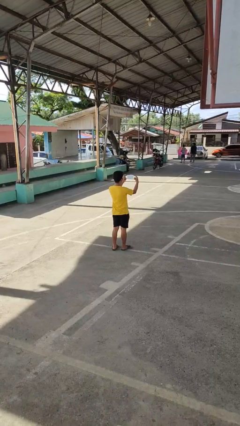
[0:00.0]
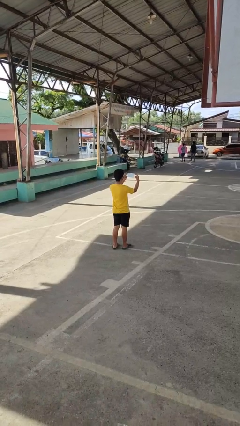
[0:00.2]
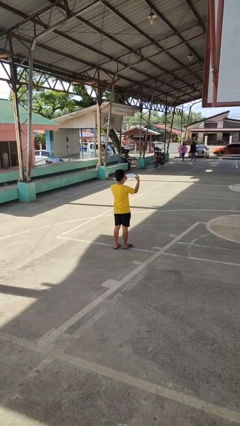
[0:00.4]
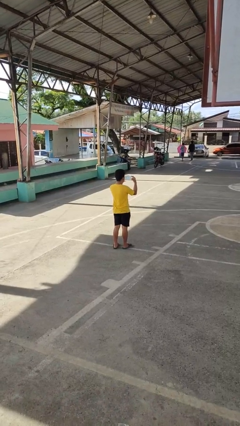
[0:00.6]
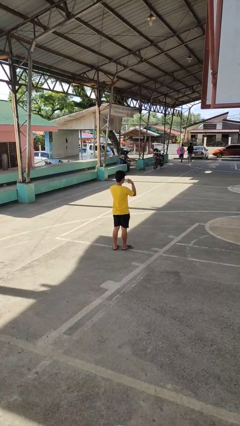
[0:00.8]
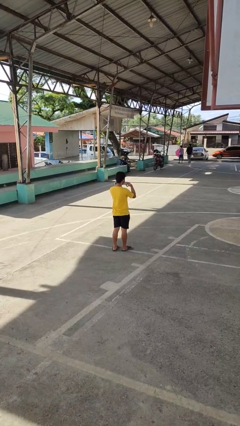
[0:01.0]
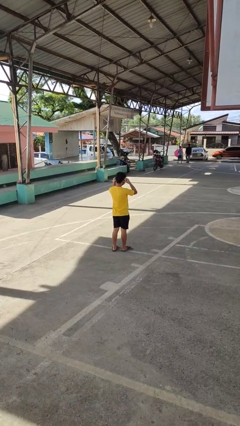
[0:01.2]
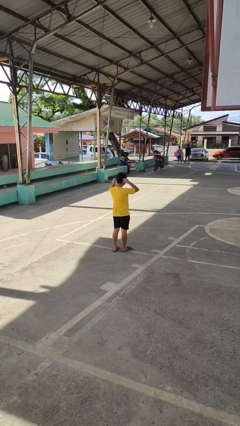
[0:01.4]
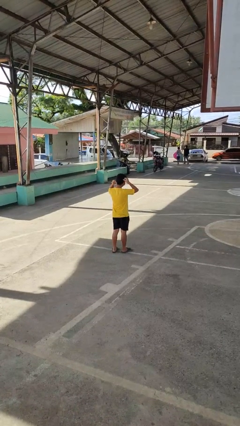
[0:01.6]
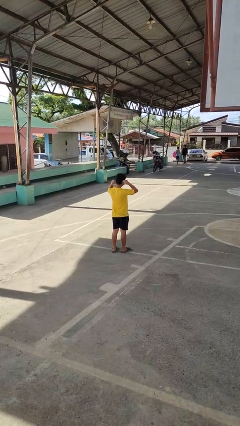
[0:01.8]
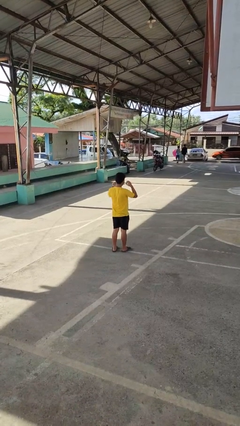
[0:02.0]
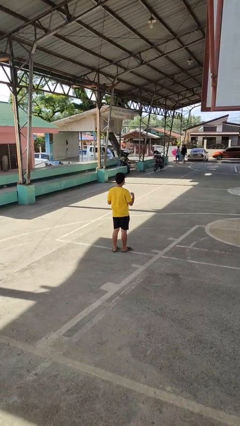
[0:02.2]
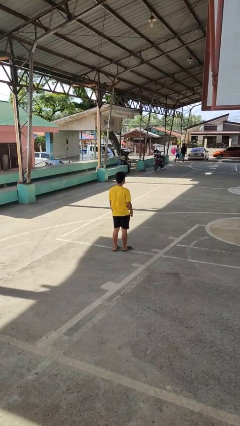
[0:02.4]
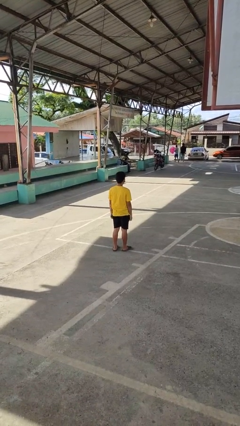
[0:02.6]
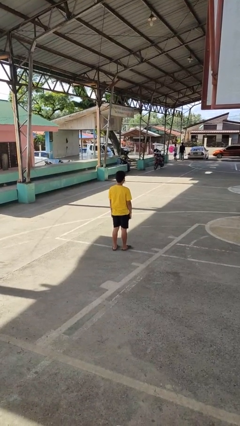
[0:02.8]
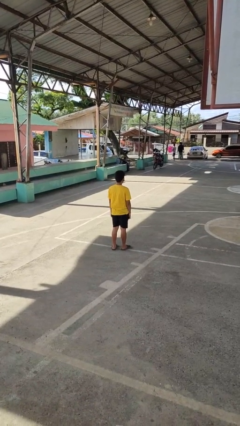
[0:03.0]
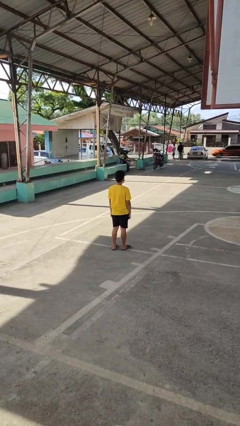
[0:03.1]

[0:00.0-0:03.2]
person puts on facemask

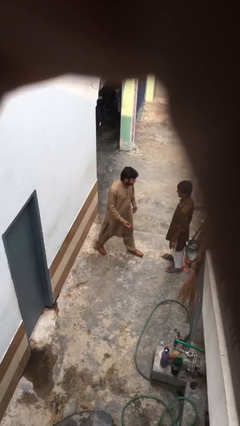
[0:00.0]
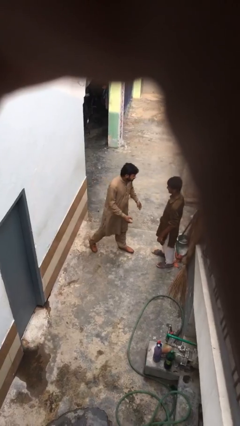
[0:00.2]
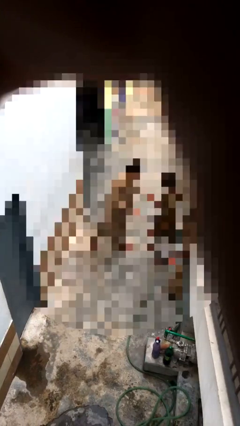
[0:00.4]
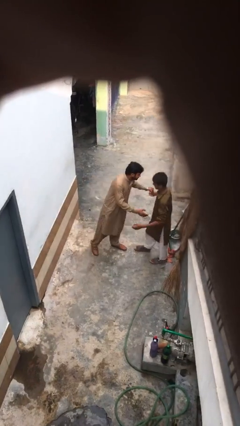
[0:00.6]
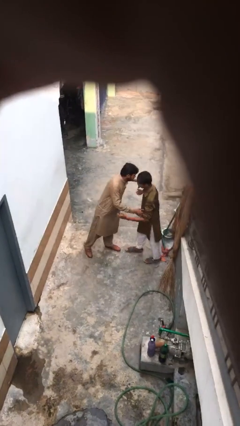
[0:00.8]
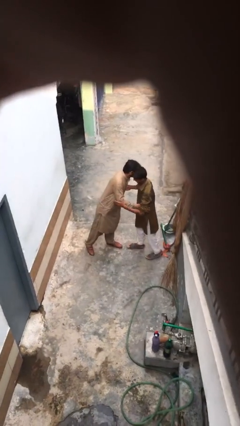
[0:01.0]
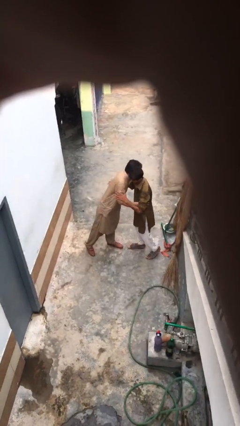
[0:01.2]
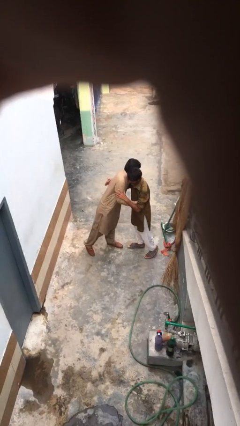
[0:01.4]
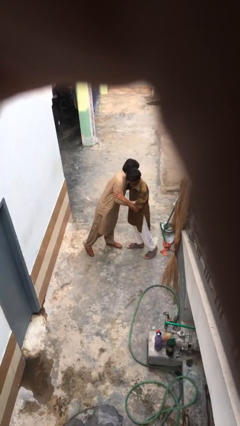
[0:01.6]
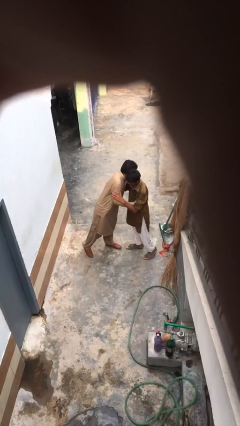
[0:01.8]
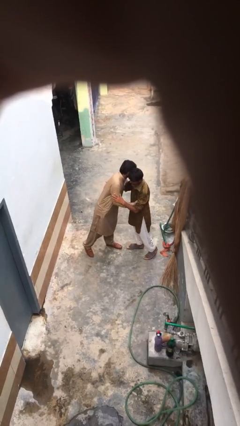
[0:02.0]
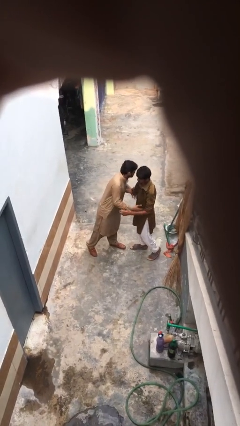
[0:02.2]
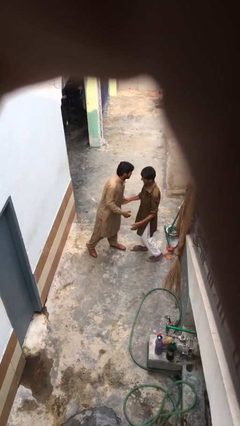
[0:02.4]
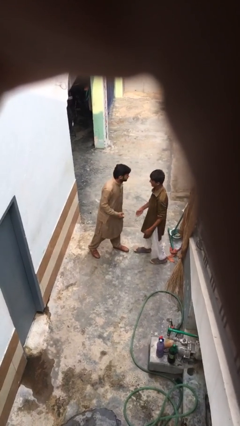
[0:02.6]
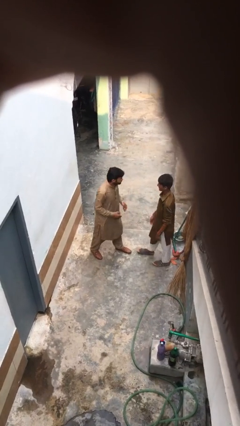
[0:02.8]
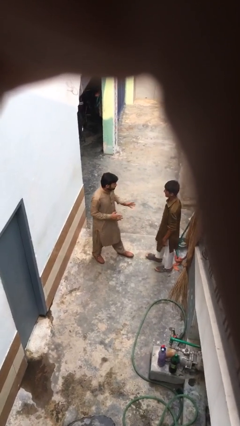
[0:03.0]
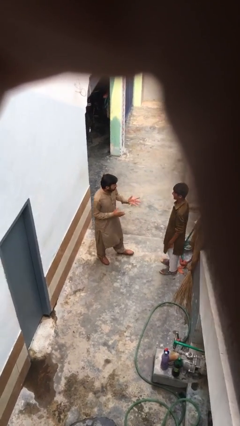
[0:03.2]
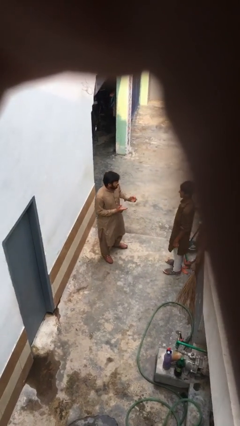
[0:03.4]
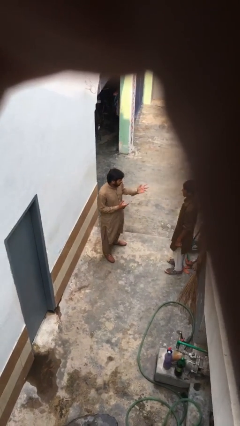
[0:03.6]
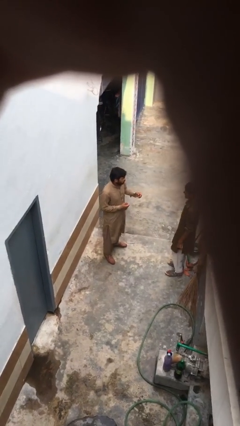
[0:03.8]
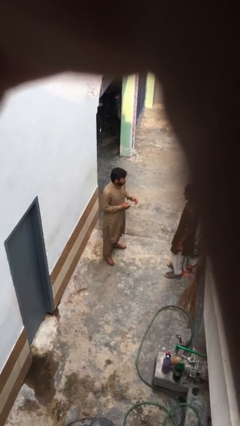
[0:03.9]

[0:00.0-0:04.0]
person embraces person

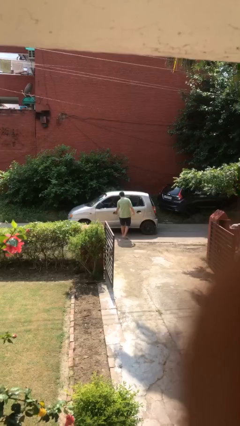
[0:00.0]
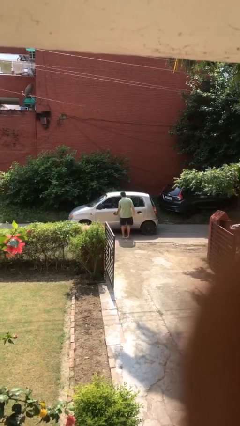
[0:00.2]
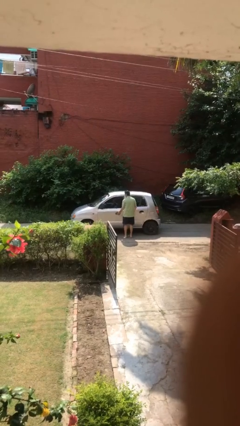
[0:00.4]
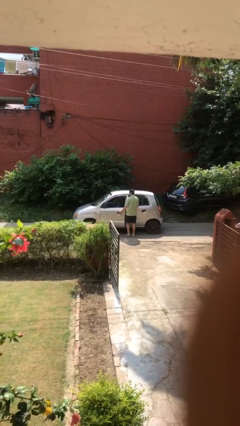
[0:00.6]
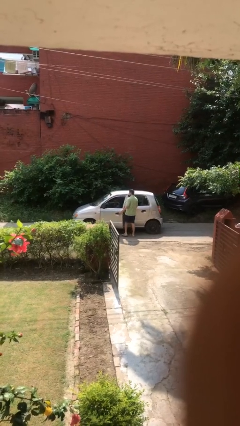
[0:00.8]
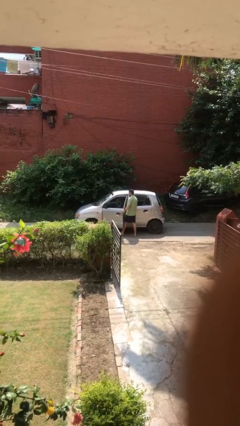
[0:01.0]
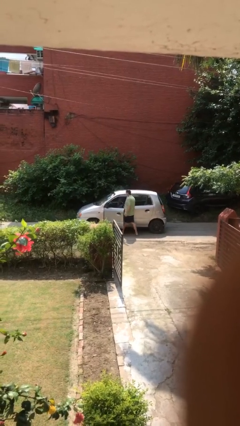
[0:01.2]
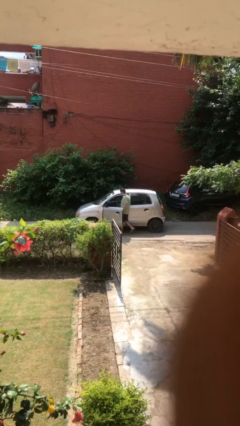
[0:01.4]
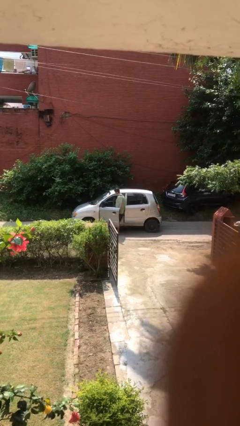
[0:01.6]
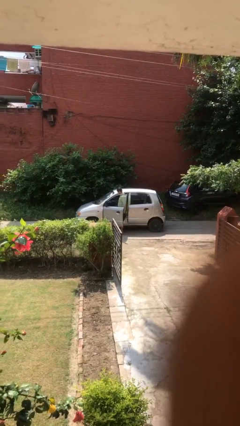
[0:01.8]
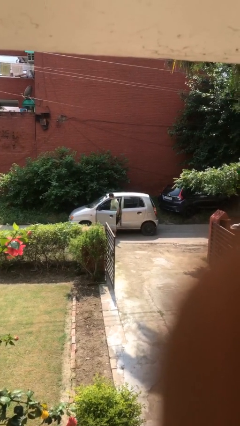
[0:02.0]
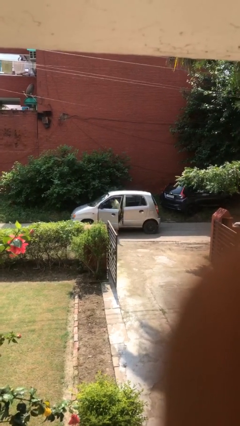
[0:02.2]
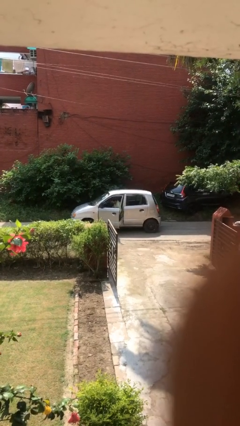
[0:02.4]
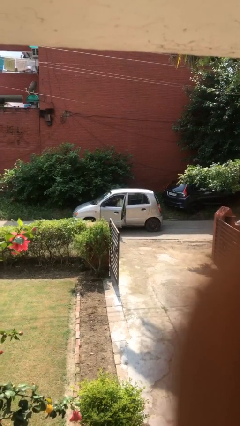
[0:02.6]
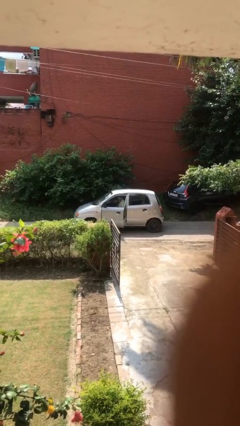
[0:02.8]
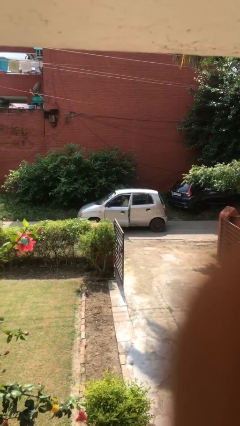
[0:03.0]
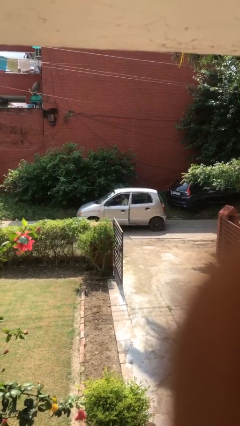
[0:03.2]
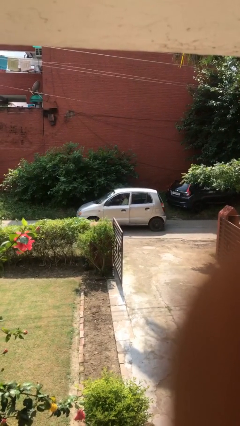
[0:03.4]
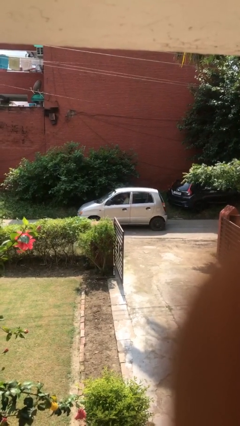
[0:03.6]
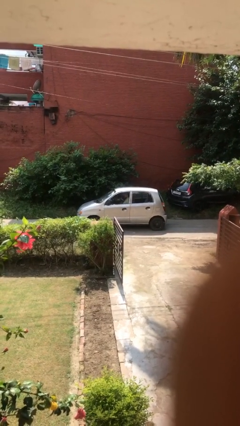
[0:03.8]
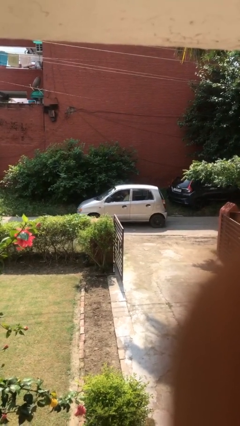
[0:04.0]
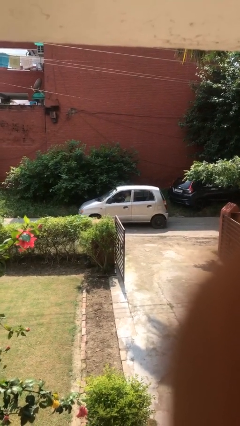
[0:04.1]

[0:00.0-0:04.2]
car picks up person

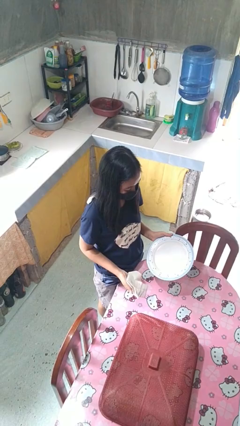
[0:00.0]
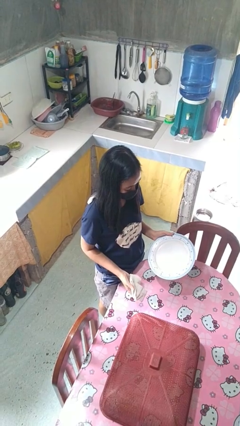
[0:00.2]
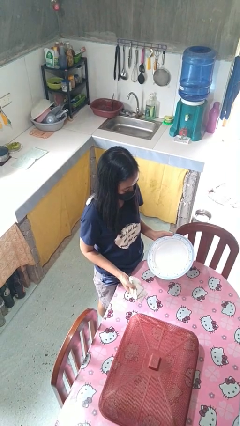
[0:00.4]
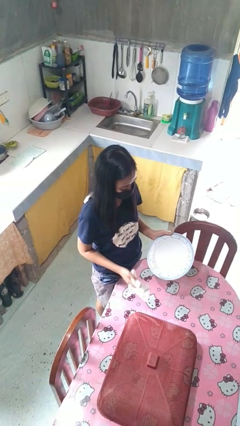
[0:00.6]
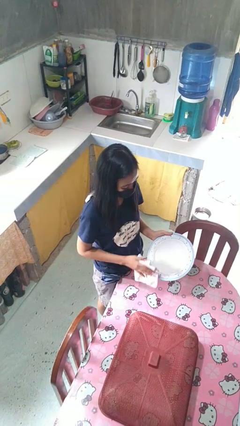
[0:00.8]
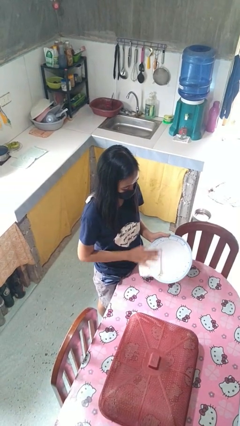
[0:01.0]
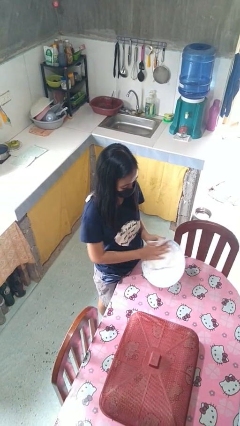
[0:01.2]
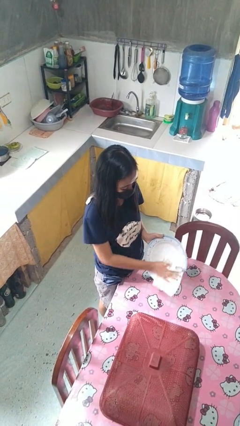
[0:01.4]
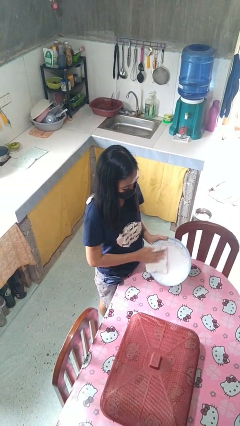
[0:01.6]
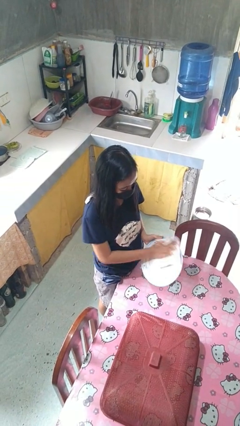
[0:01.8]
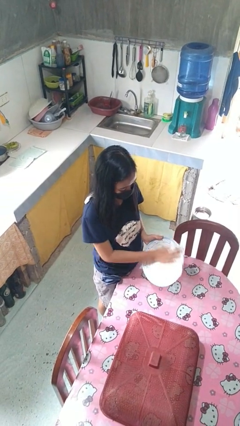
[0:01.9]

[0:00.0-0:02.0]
person dries dish

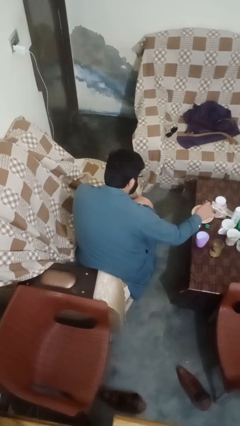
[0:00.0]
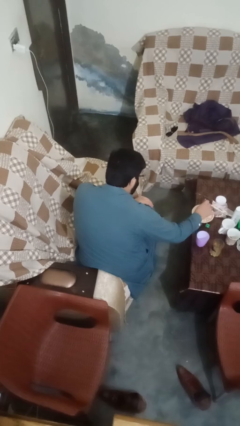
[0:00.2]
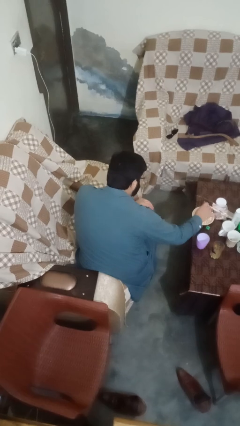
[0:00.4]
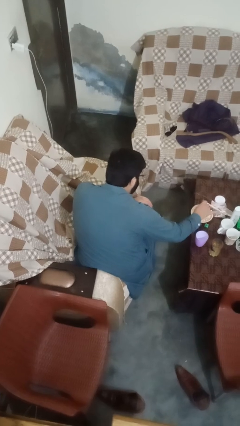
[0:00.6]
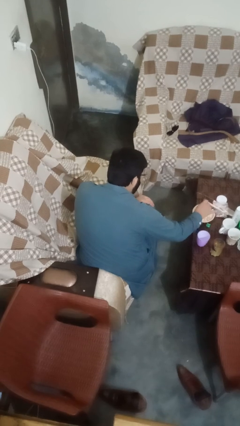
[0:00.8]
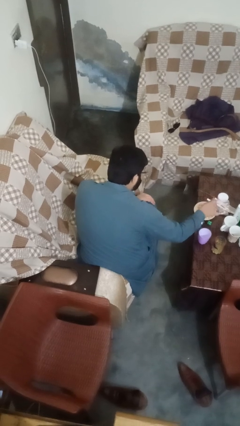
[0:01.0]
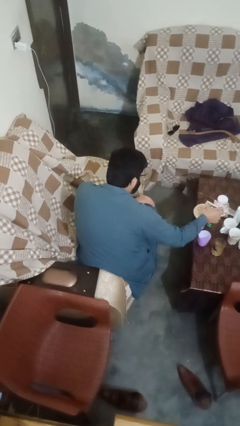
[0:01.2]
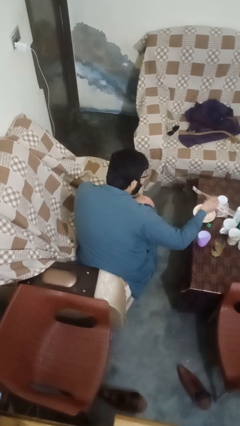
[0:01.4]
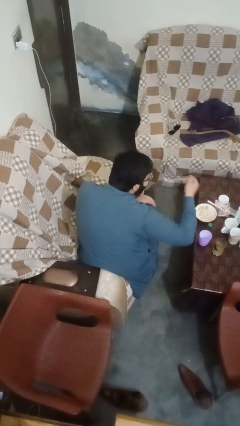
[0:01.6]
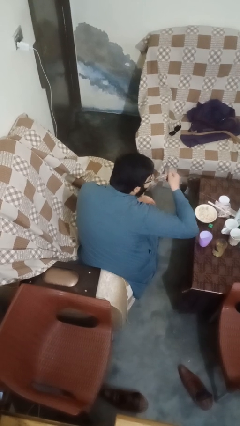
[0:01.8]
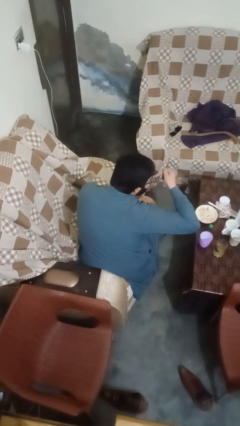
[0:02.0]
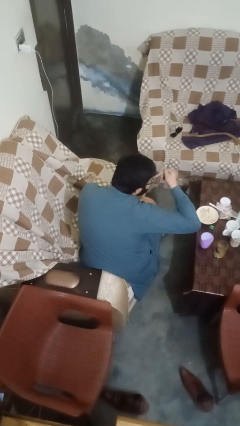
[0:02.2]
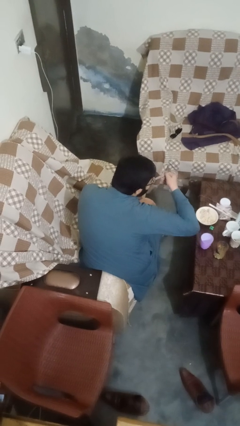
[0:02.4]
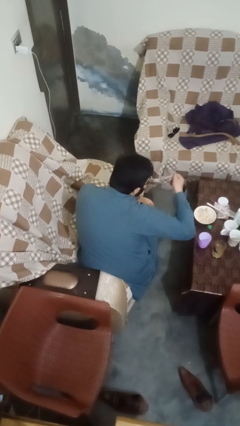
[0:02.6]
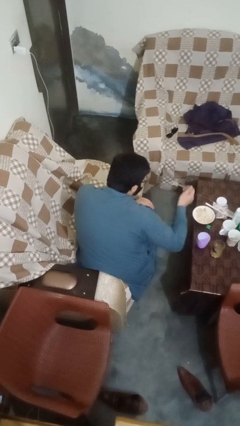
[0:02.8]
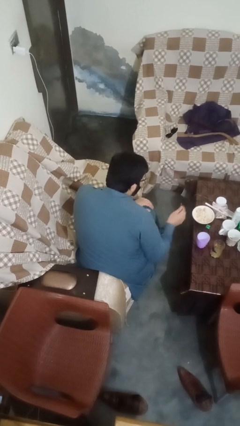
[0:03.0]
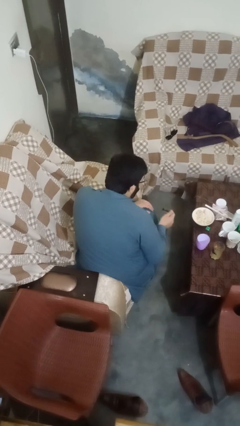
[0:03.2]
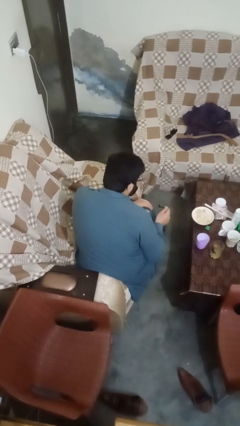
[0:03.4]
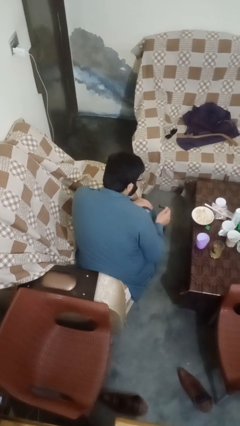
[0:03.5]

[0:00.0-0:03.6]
person eats with utensil

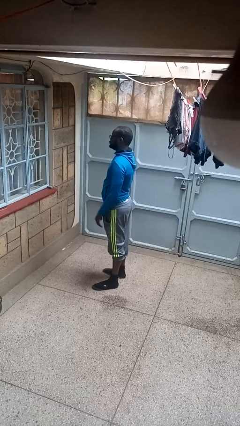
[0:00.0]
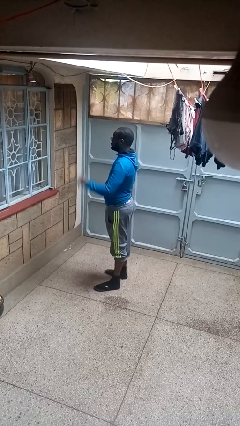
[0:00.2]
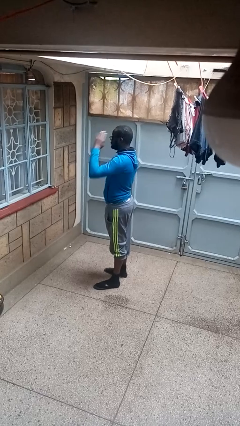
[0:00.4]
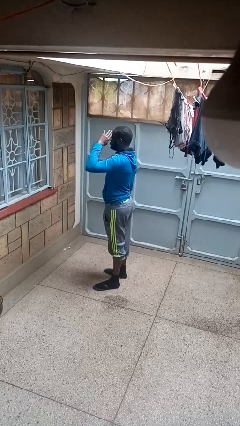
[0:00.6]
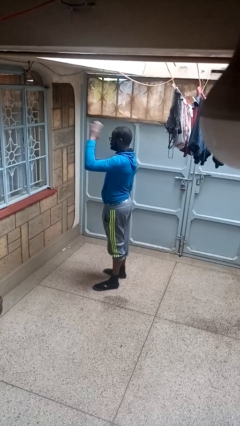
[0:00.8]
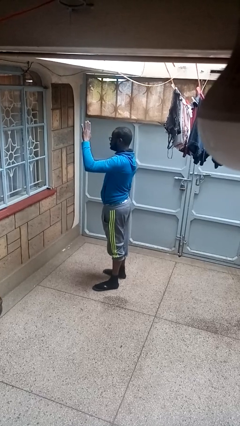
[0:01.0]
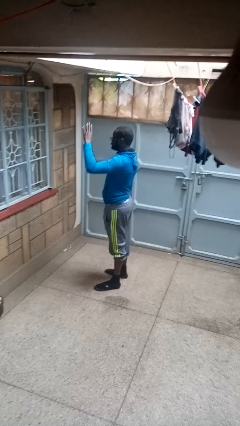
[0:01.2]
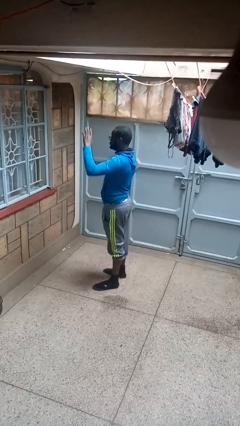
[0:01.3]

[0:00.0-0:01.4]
person salutes
